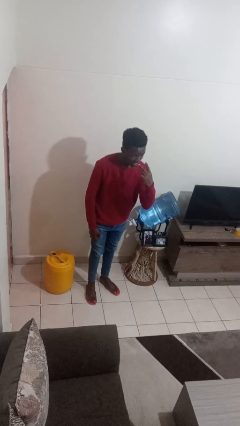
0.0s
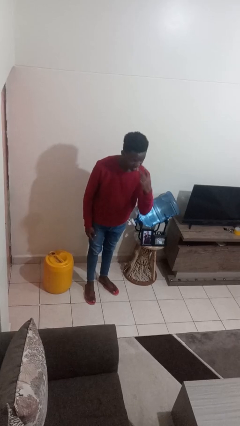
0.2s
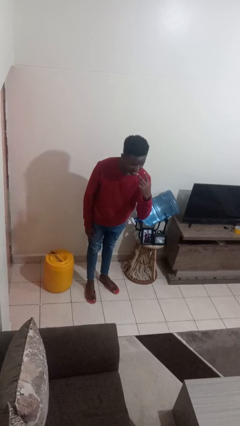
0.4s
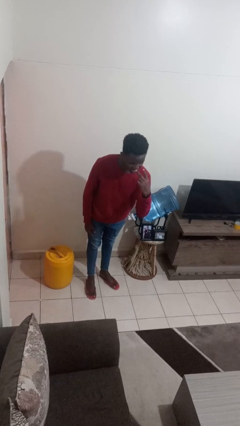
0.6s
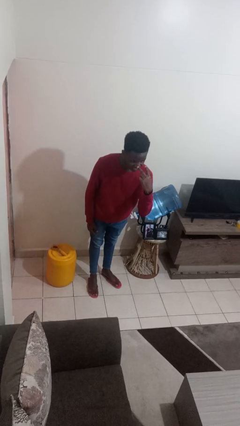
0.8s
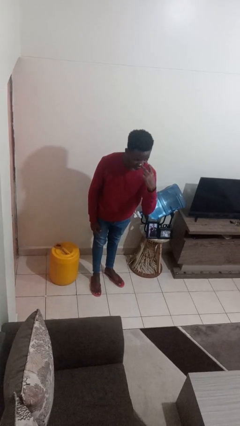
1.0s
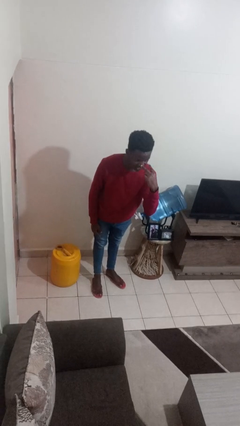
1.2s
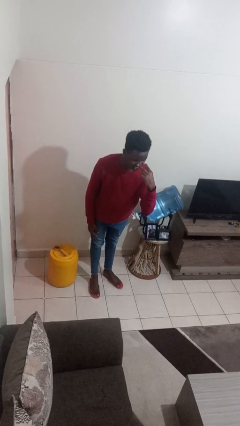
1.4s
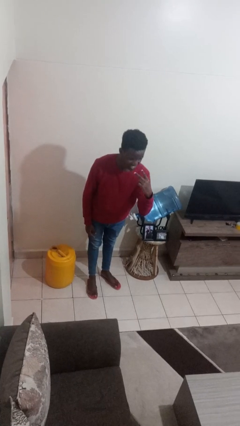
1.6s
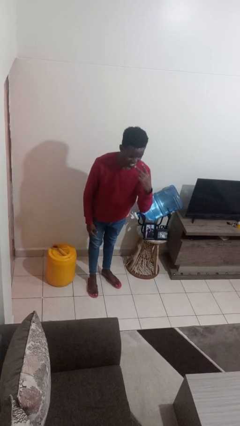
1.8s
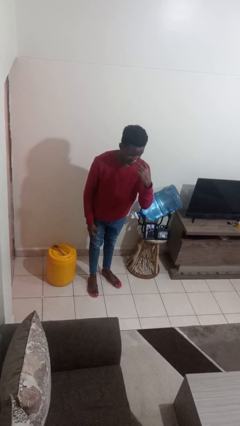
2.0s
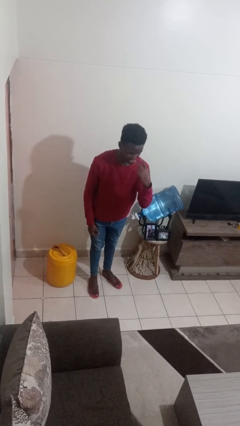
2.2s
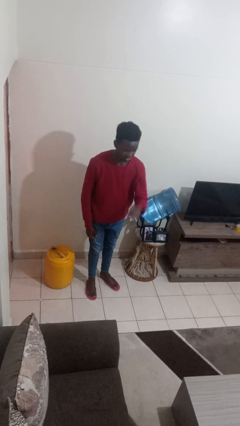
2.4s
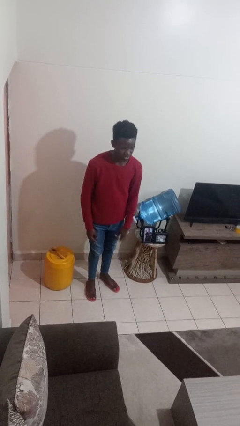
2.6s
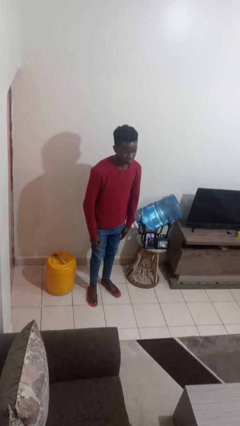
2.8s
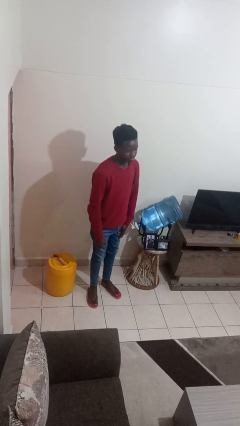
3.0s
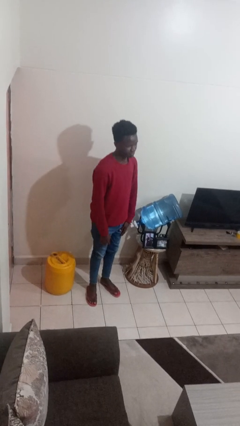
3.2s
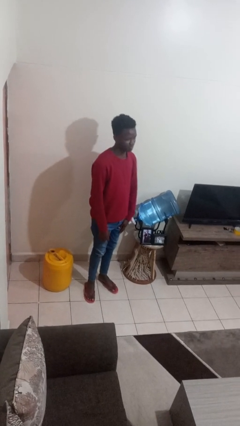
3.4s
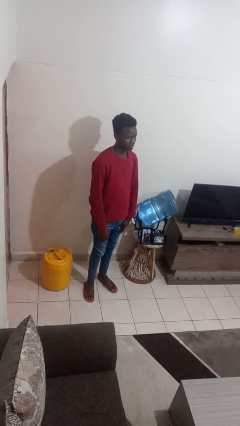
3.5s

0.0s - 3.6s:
person gestures watch closely

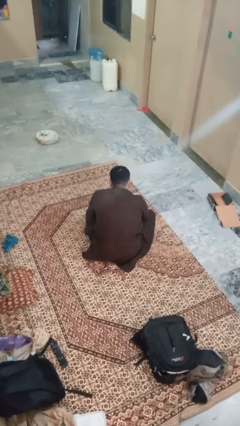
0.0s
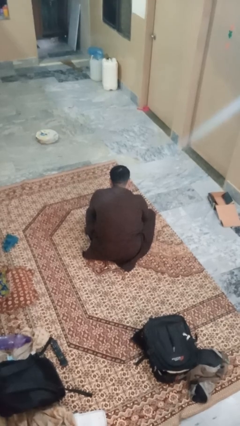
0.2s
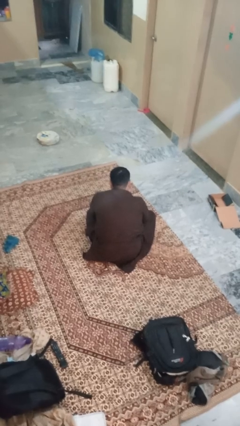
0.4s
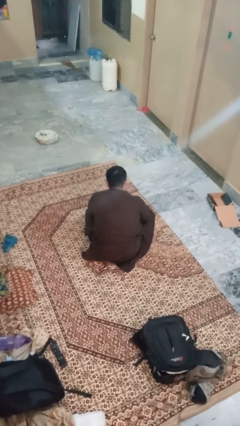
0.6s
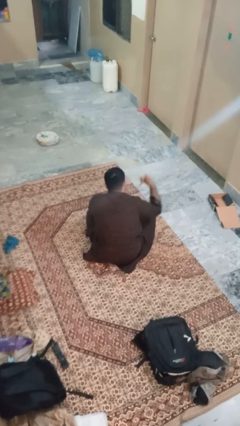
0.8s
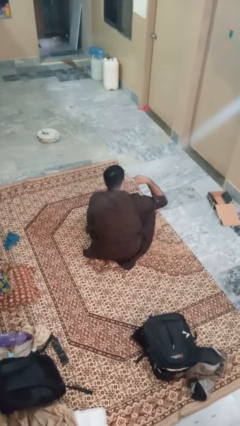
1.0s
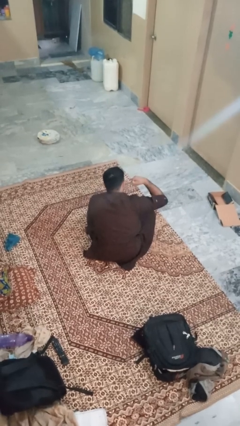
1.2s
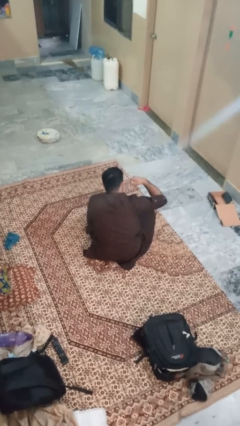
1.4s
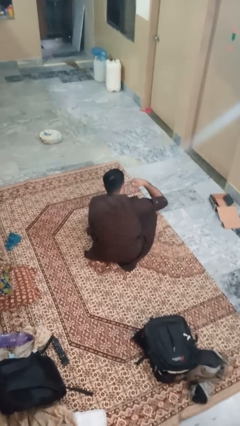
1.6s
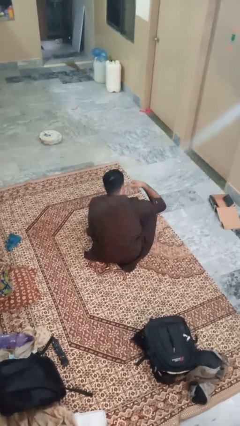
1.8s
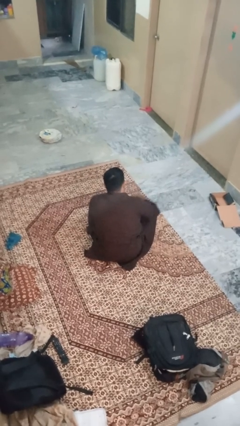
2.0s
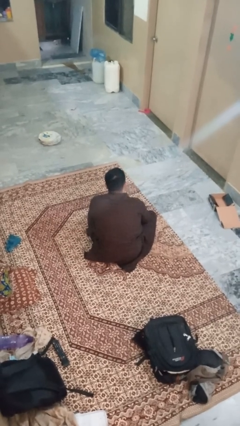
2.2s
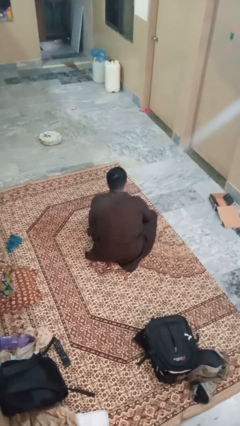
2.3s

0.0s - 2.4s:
person gestures call me

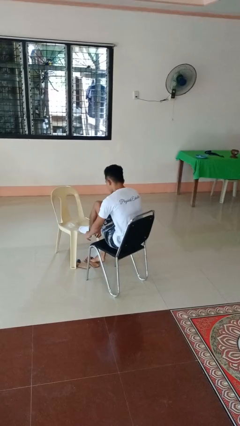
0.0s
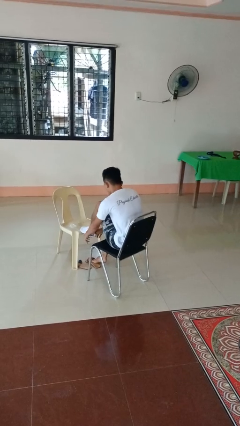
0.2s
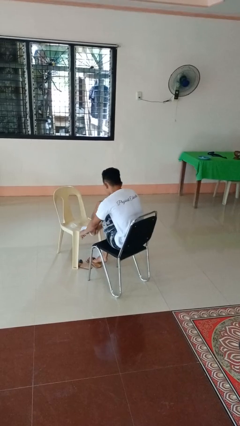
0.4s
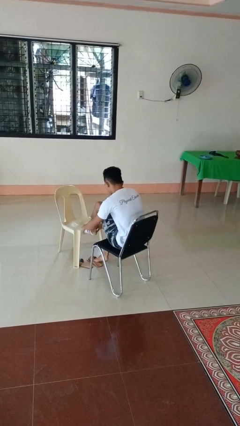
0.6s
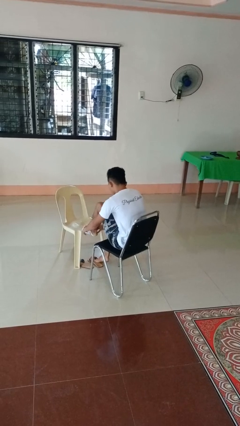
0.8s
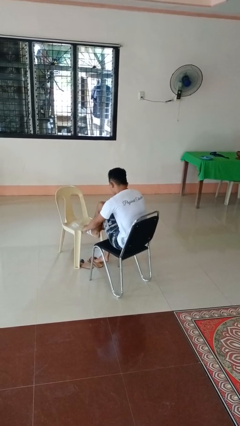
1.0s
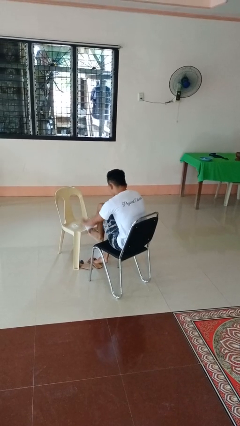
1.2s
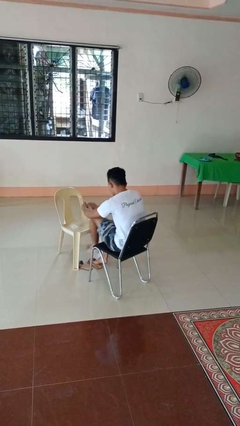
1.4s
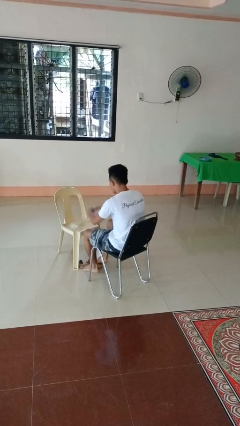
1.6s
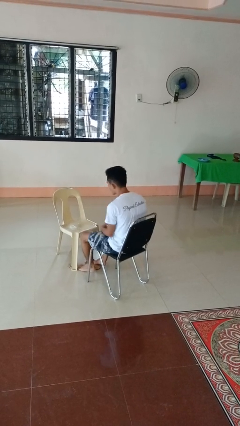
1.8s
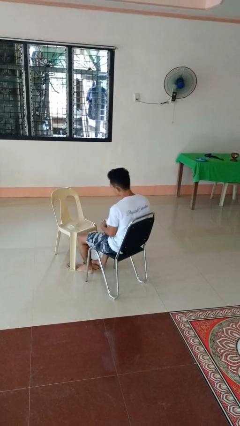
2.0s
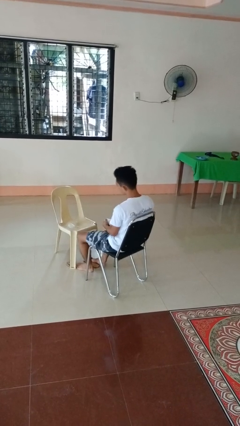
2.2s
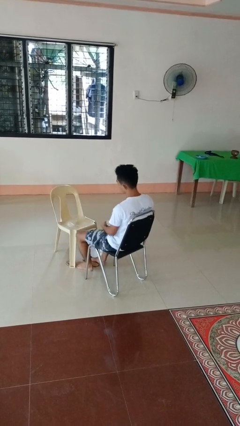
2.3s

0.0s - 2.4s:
person takes off socks

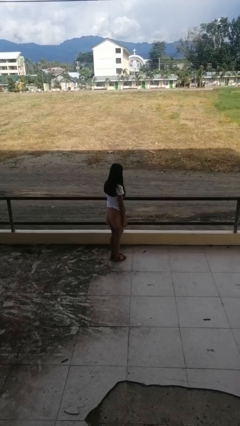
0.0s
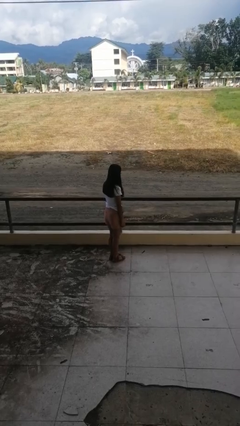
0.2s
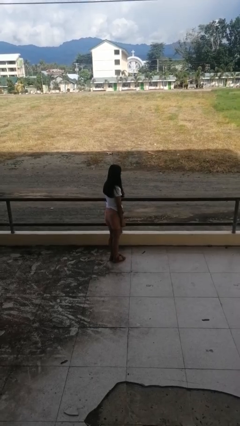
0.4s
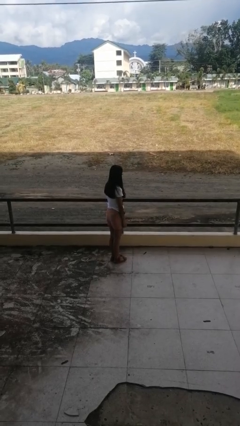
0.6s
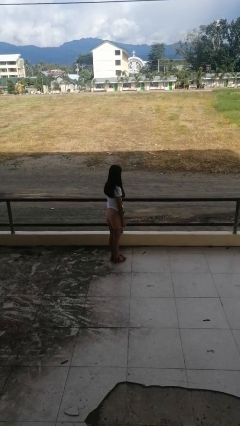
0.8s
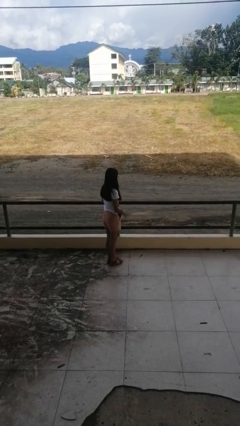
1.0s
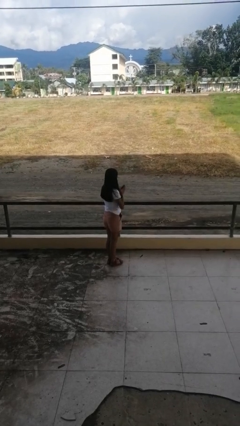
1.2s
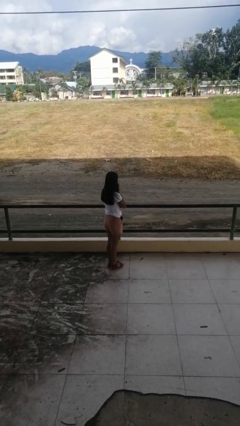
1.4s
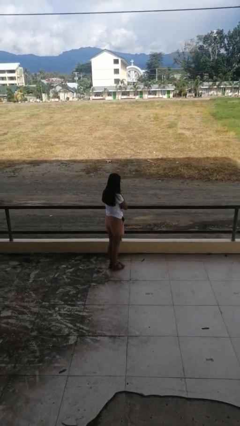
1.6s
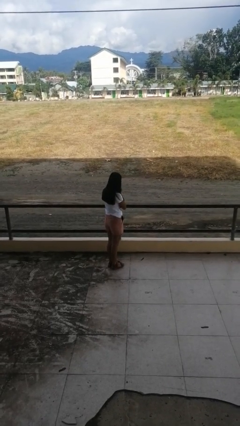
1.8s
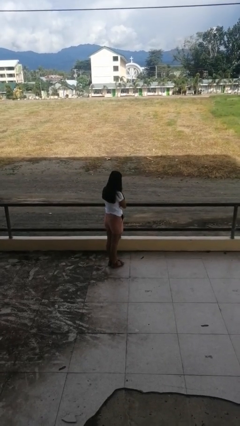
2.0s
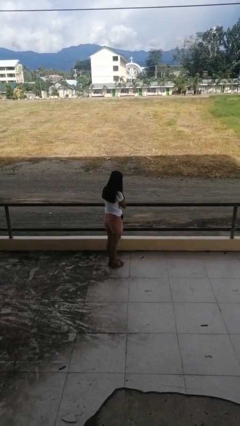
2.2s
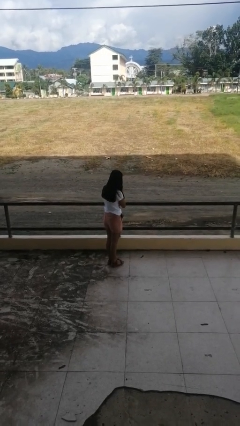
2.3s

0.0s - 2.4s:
person sneezes into hand

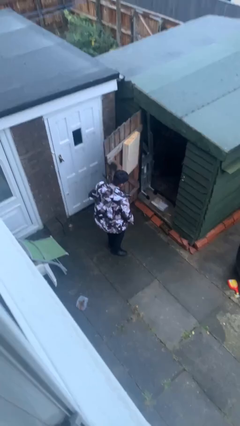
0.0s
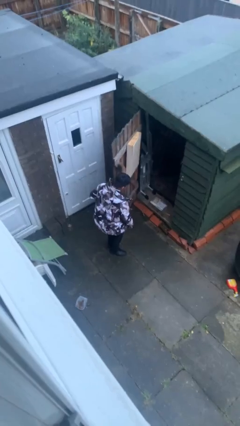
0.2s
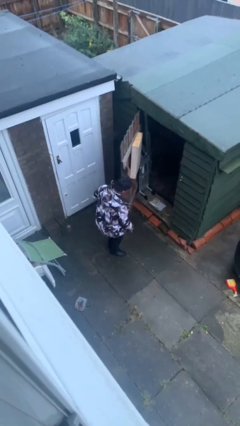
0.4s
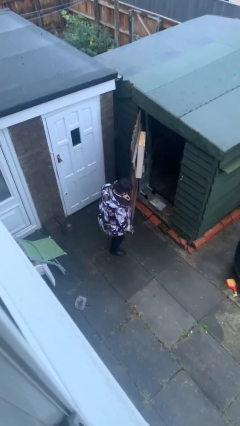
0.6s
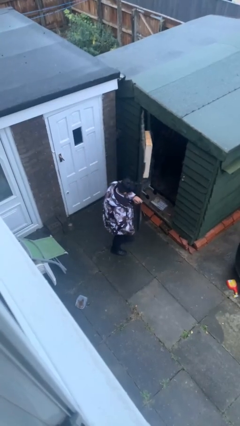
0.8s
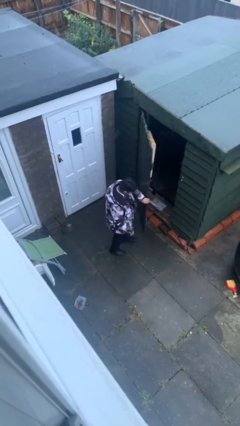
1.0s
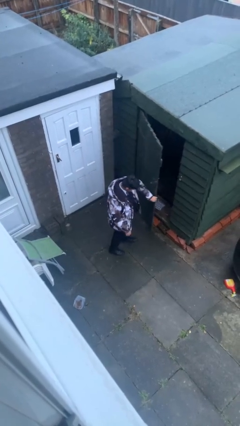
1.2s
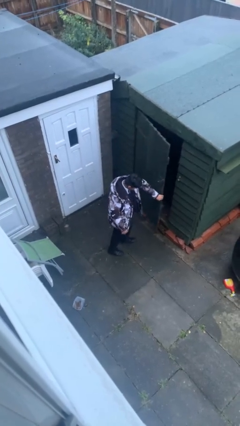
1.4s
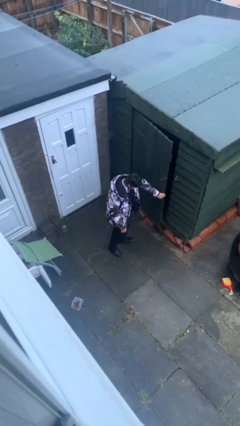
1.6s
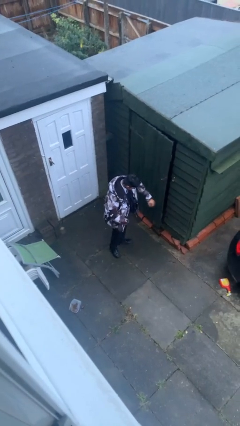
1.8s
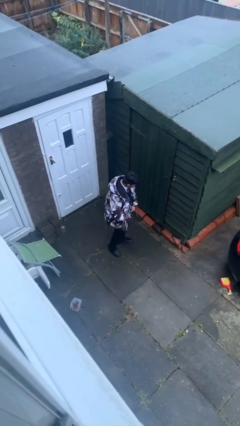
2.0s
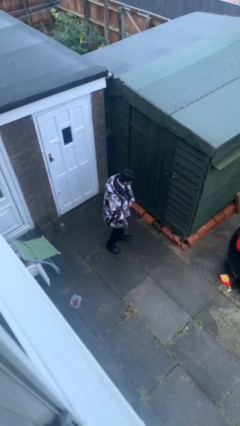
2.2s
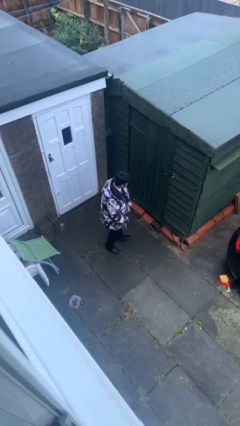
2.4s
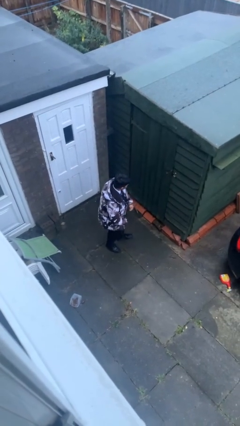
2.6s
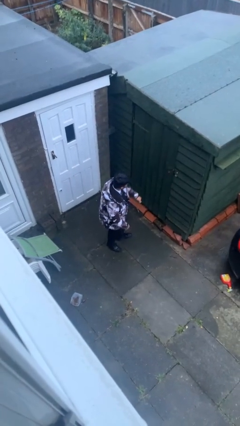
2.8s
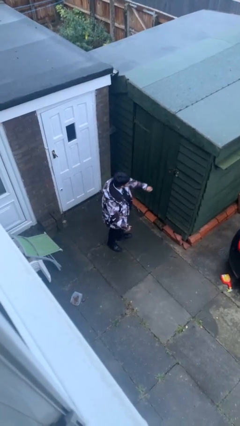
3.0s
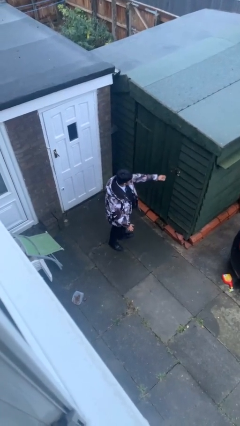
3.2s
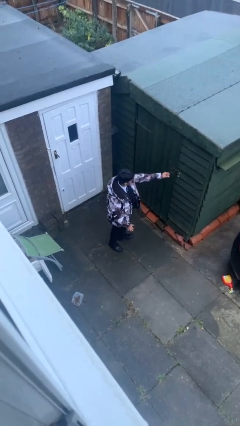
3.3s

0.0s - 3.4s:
person closes facility door

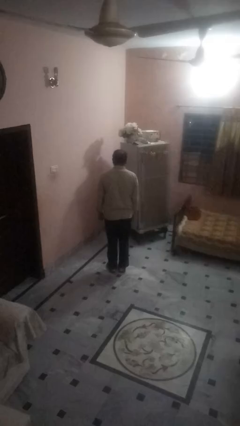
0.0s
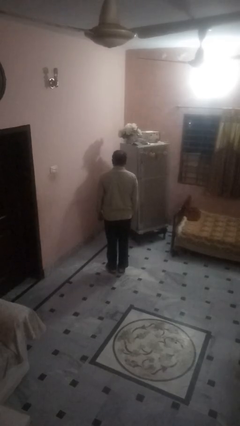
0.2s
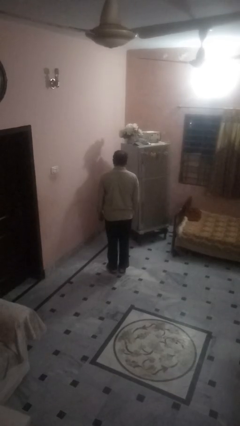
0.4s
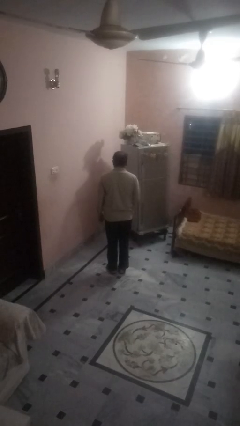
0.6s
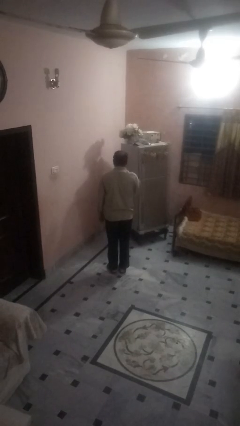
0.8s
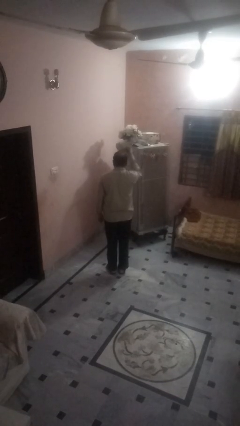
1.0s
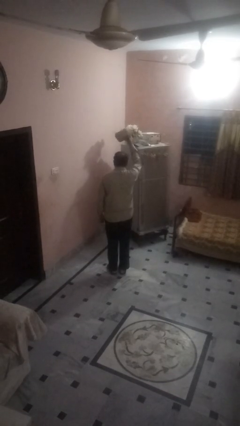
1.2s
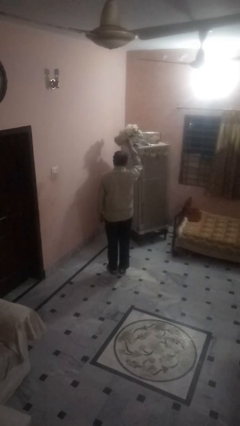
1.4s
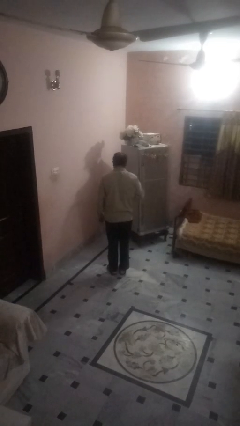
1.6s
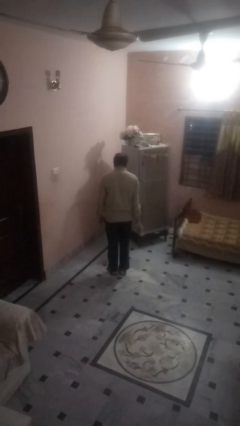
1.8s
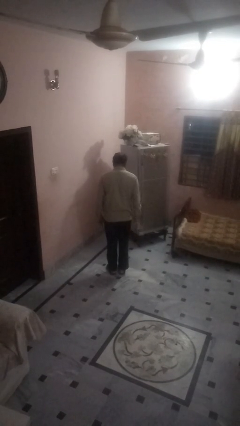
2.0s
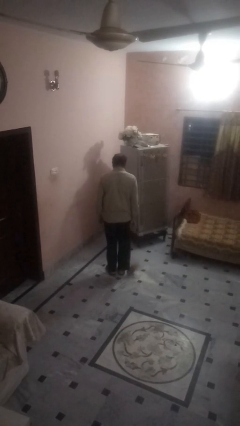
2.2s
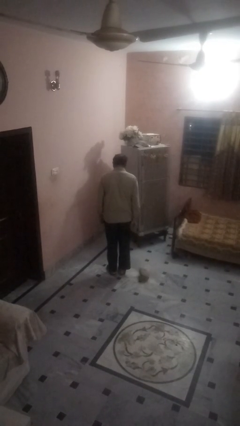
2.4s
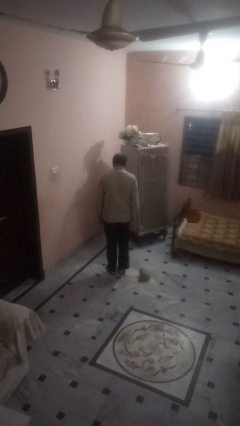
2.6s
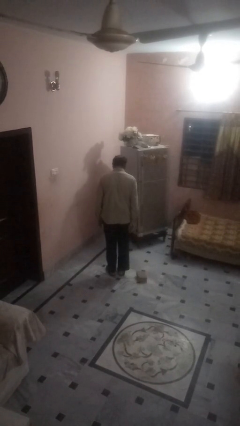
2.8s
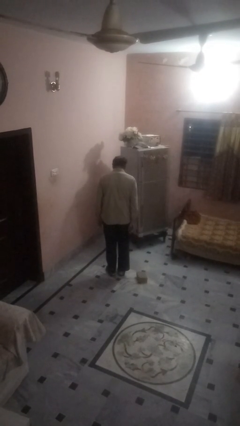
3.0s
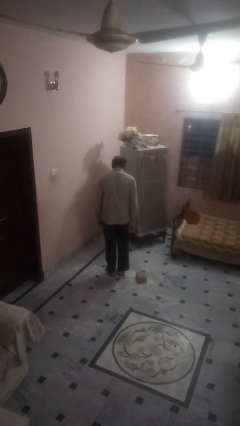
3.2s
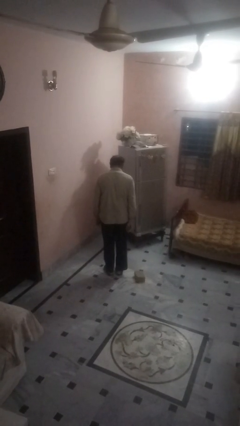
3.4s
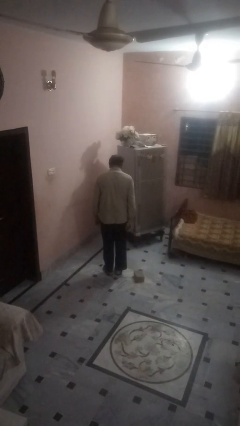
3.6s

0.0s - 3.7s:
person throws object into air

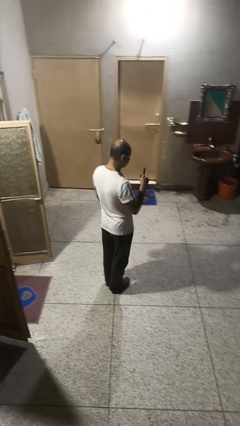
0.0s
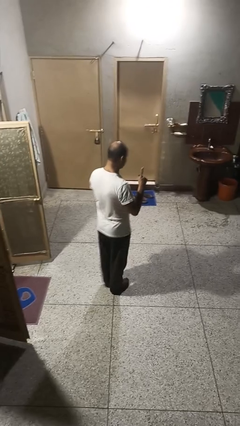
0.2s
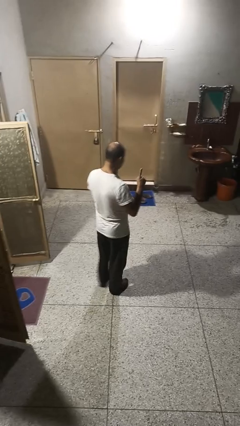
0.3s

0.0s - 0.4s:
person gestures number one
